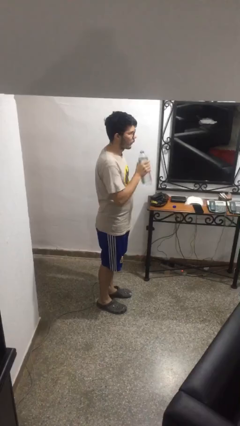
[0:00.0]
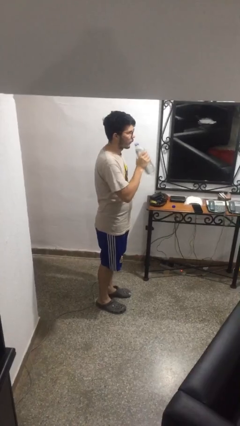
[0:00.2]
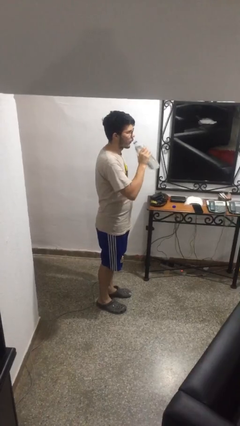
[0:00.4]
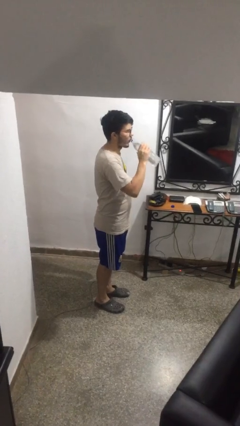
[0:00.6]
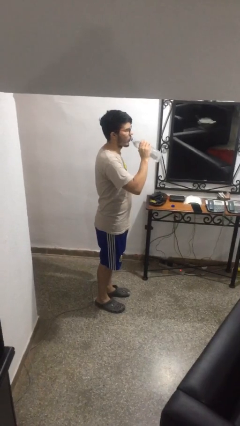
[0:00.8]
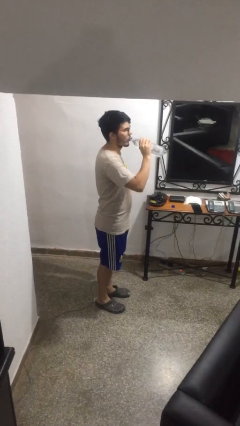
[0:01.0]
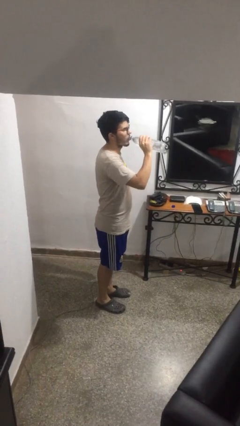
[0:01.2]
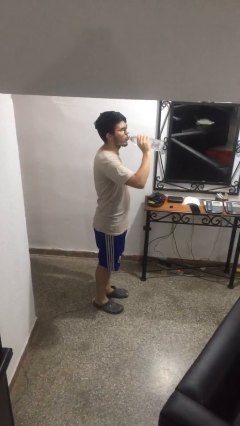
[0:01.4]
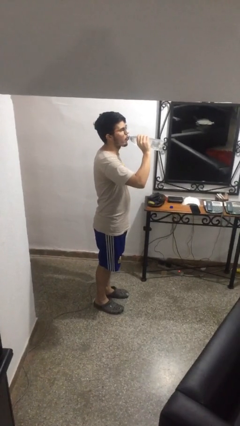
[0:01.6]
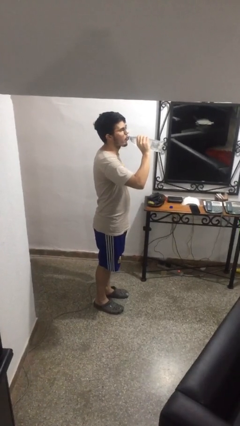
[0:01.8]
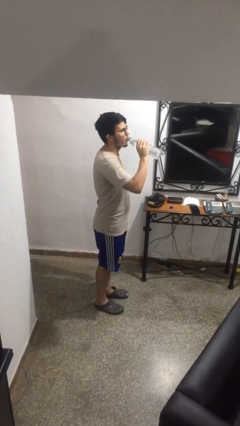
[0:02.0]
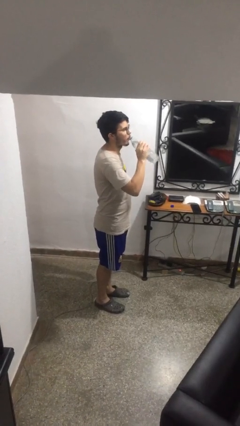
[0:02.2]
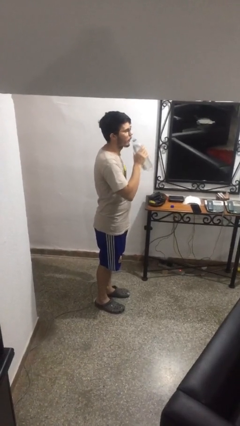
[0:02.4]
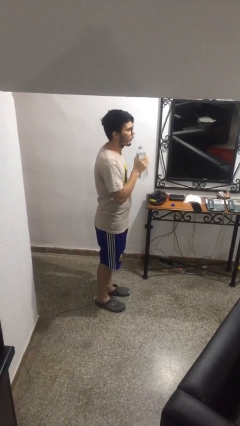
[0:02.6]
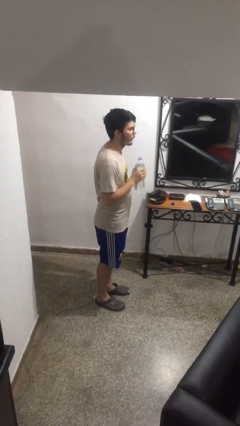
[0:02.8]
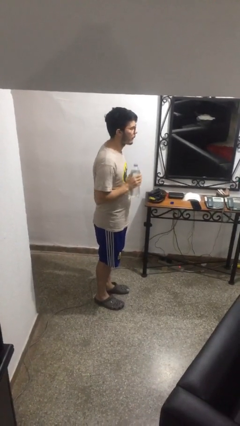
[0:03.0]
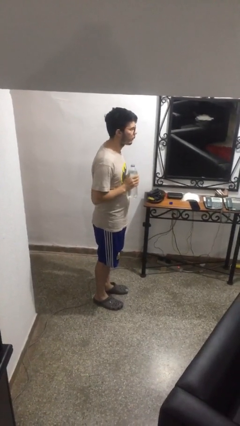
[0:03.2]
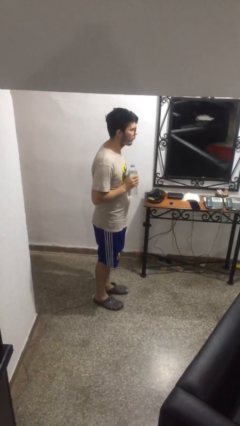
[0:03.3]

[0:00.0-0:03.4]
person drinks from bottle

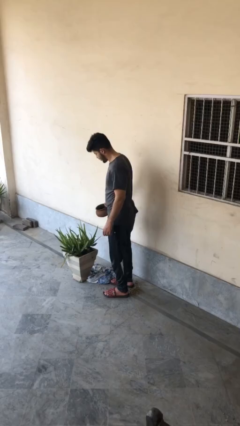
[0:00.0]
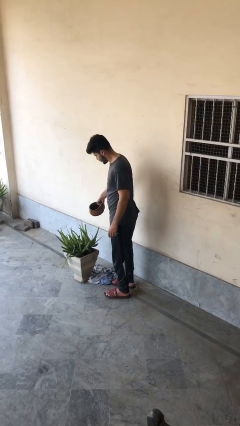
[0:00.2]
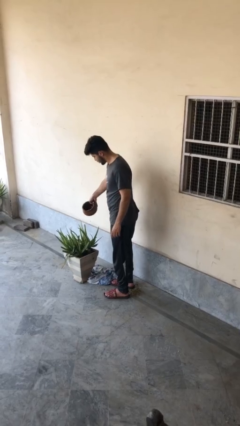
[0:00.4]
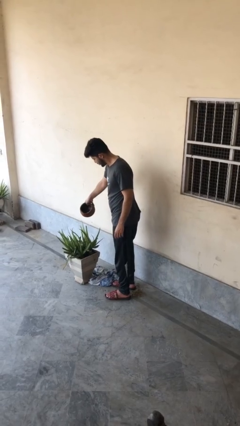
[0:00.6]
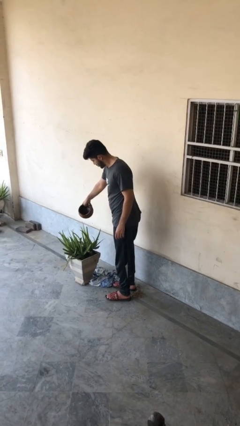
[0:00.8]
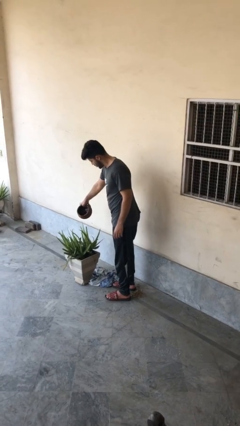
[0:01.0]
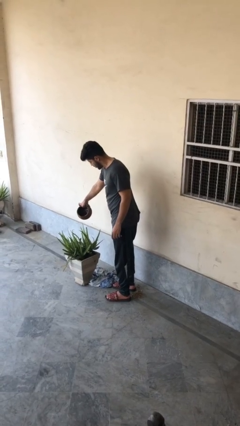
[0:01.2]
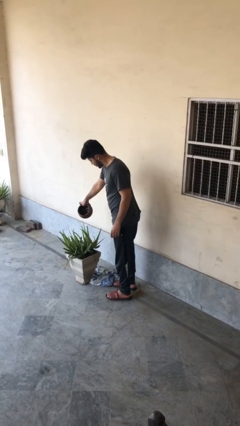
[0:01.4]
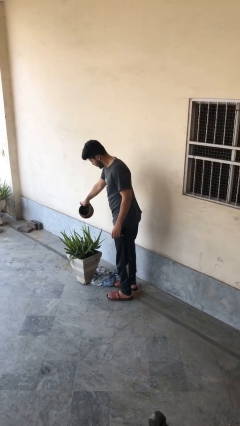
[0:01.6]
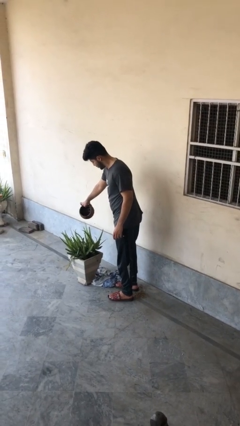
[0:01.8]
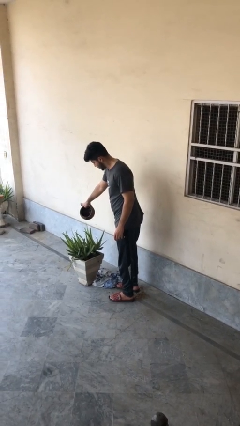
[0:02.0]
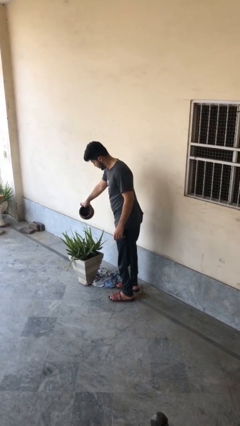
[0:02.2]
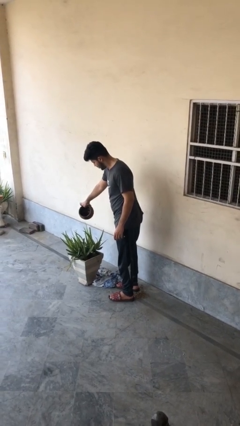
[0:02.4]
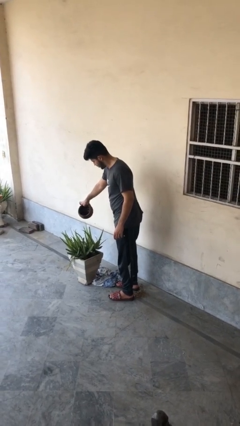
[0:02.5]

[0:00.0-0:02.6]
person waters houseplant

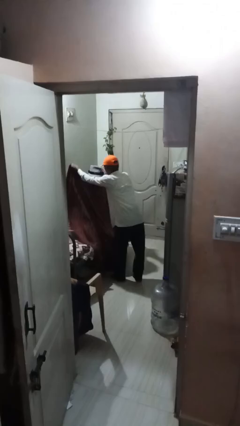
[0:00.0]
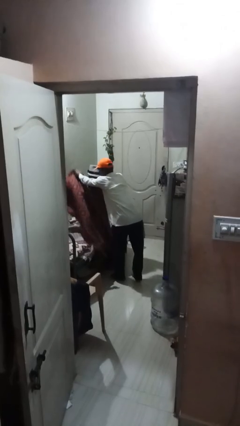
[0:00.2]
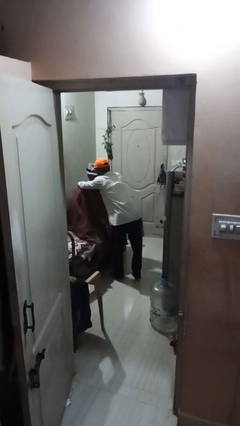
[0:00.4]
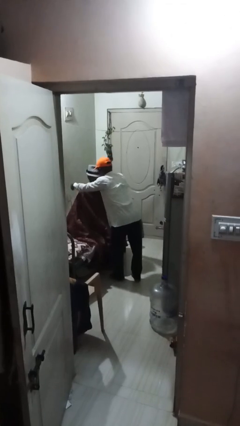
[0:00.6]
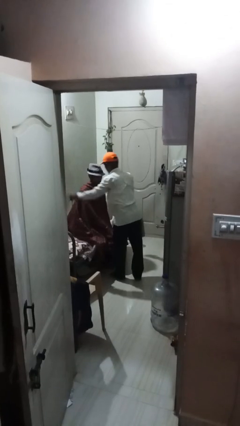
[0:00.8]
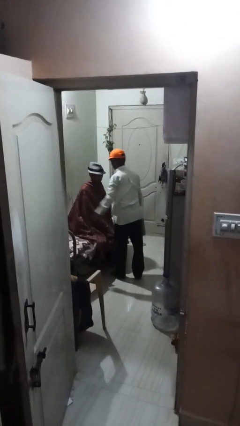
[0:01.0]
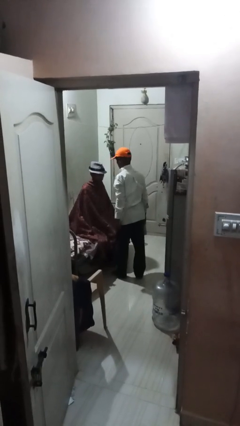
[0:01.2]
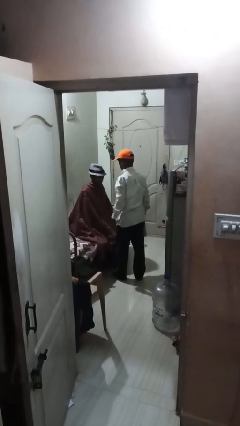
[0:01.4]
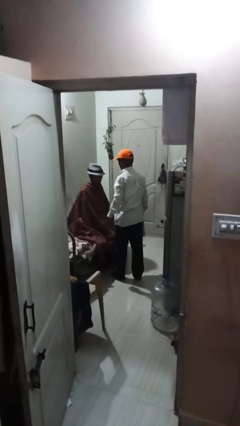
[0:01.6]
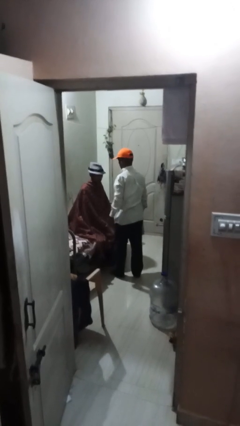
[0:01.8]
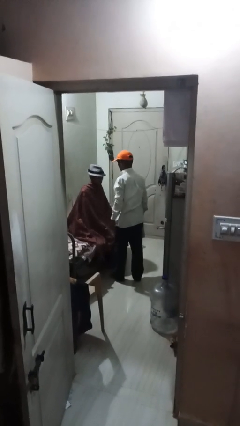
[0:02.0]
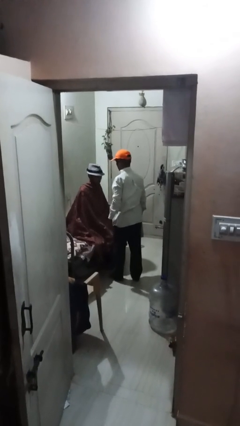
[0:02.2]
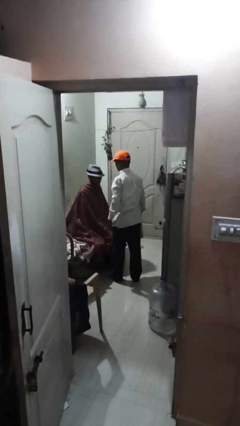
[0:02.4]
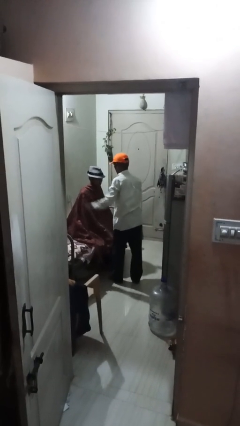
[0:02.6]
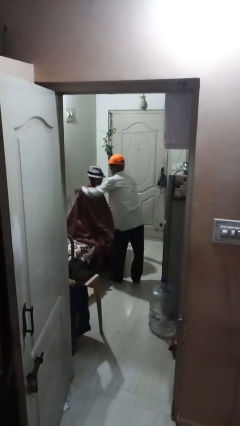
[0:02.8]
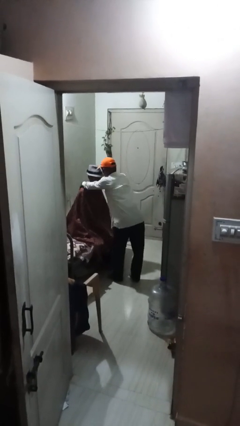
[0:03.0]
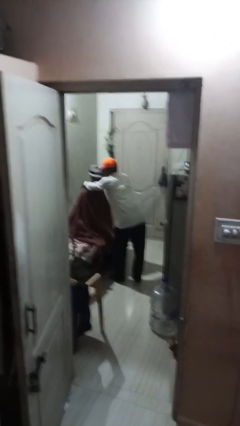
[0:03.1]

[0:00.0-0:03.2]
person covers friend with blanket

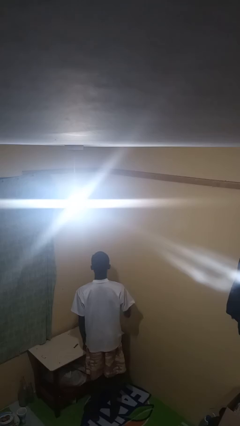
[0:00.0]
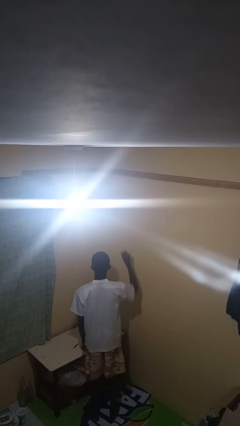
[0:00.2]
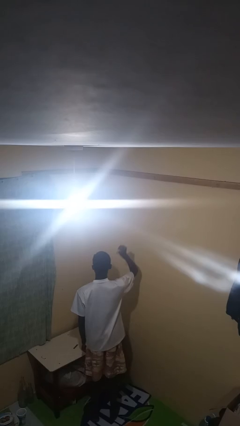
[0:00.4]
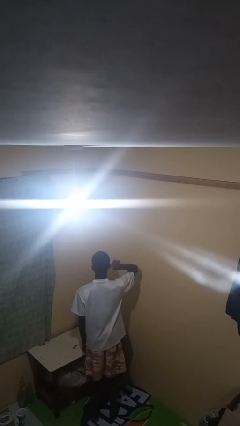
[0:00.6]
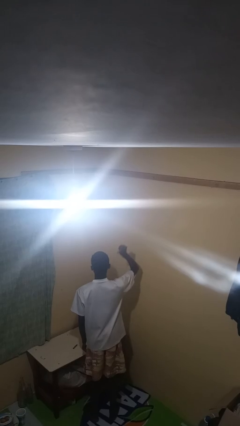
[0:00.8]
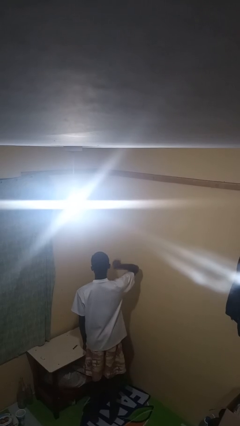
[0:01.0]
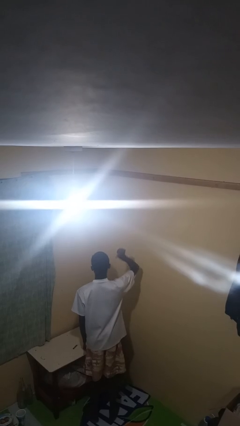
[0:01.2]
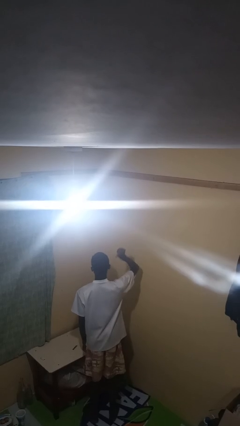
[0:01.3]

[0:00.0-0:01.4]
person gestures behind me

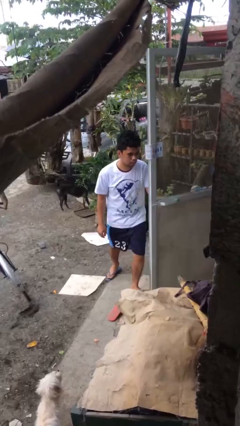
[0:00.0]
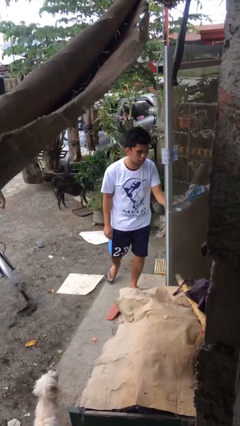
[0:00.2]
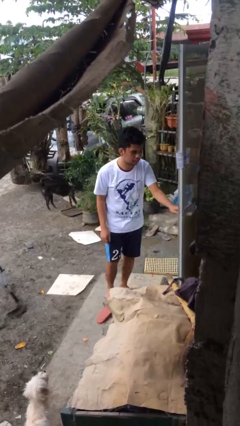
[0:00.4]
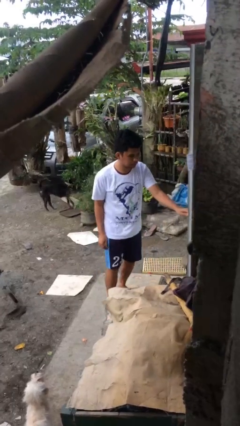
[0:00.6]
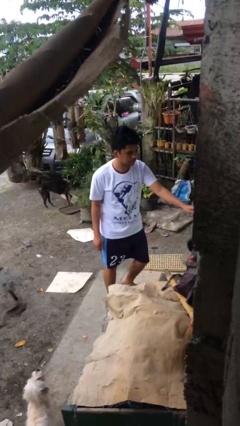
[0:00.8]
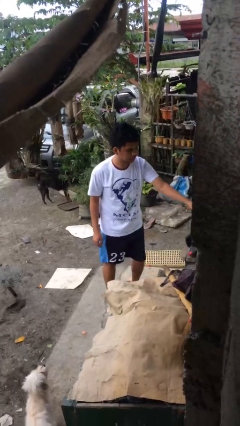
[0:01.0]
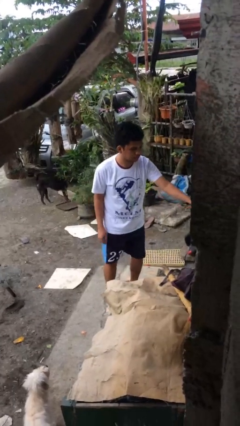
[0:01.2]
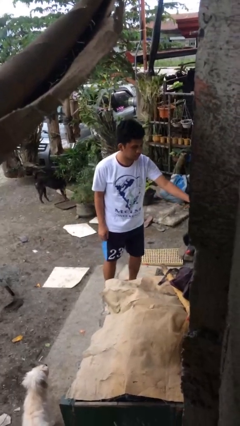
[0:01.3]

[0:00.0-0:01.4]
person closes facility door

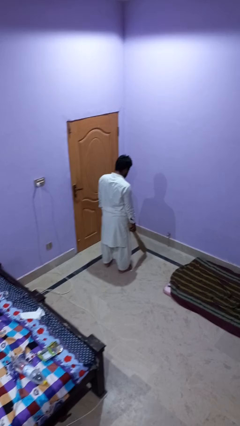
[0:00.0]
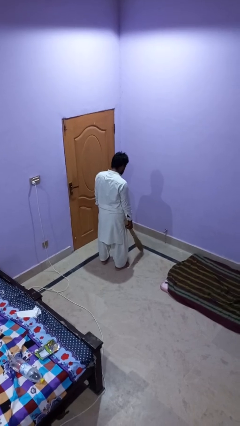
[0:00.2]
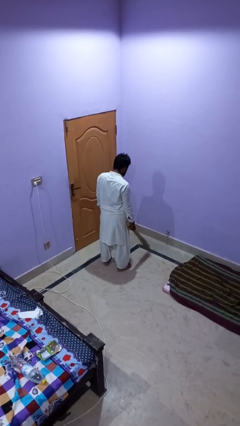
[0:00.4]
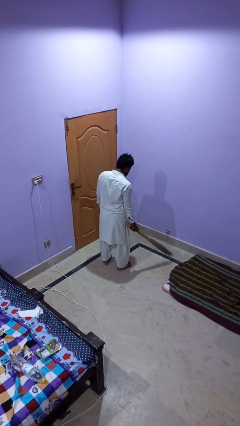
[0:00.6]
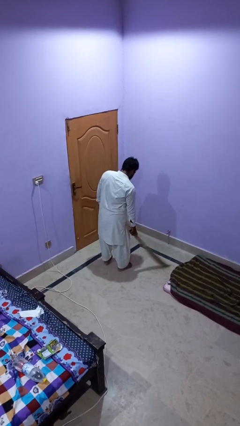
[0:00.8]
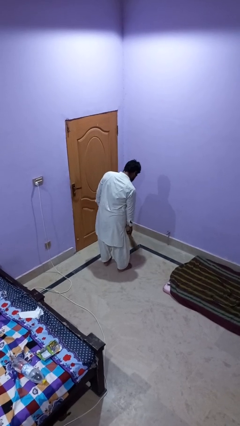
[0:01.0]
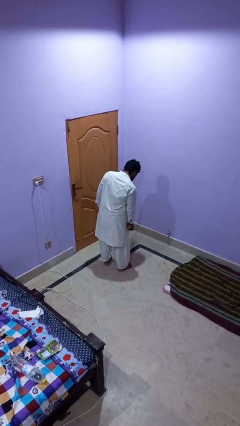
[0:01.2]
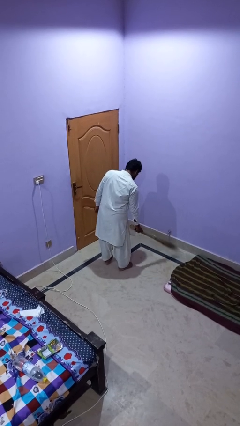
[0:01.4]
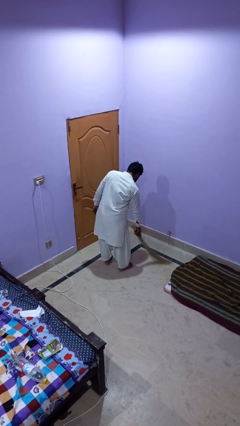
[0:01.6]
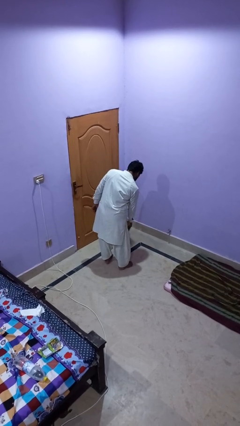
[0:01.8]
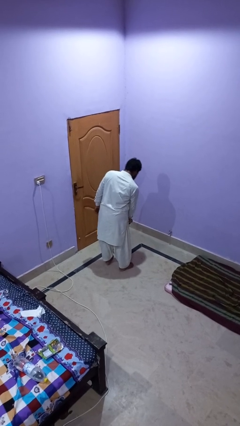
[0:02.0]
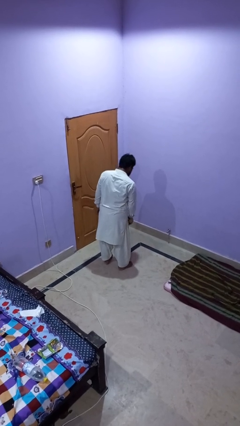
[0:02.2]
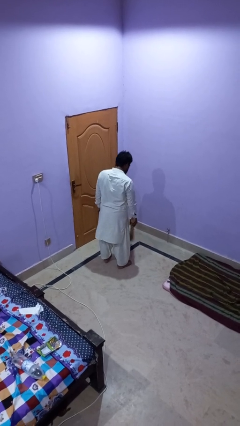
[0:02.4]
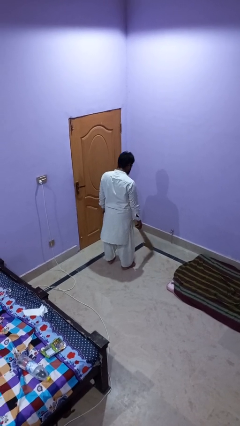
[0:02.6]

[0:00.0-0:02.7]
person sweeps floor

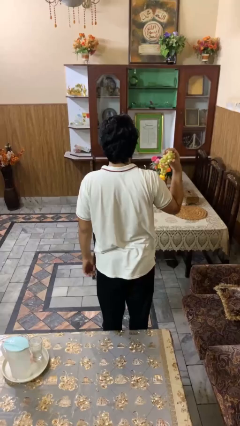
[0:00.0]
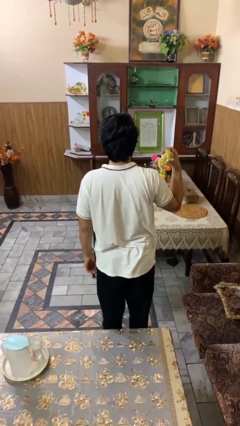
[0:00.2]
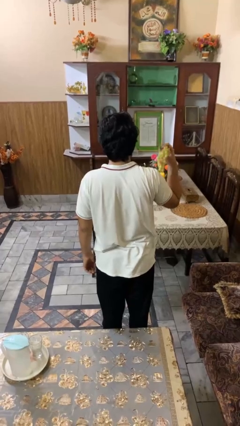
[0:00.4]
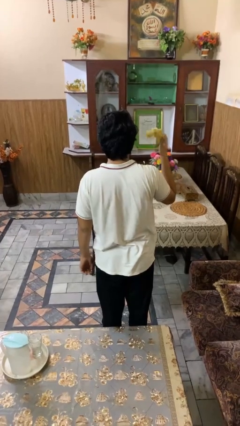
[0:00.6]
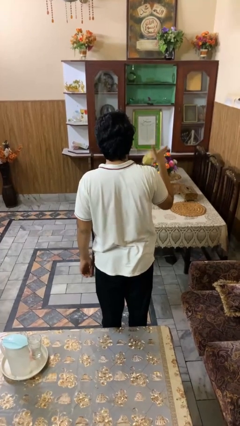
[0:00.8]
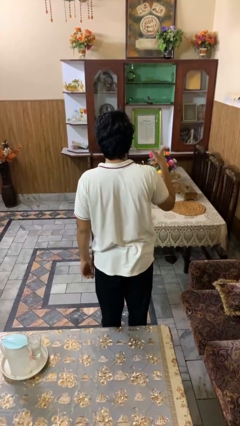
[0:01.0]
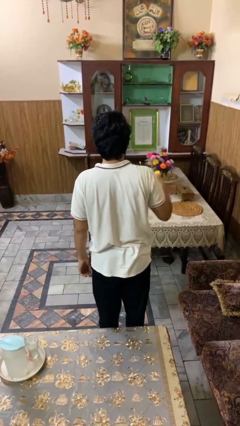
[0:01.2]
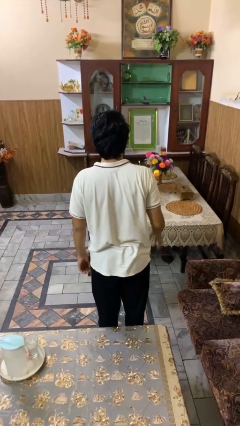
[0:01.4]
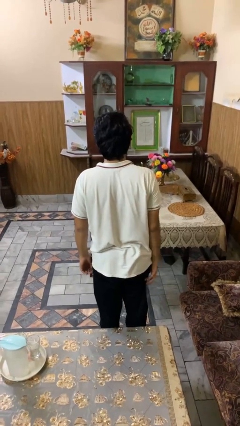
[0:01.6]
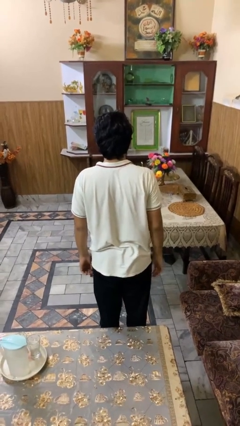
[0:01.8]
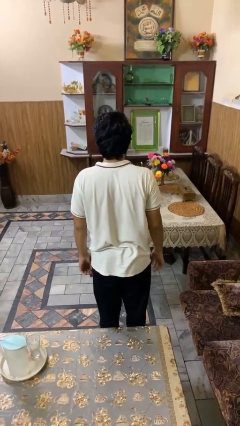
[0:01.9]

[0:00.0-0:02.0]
person throws object on table

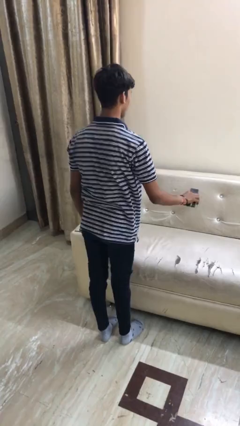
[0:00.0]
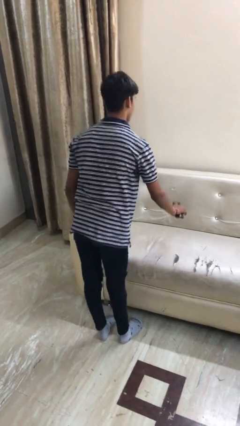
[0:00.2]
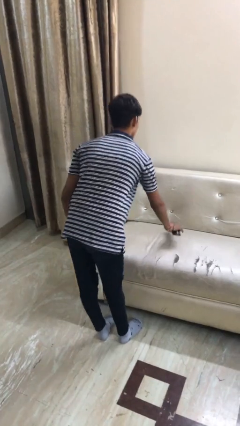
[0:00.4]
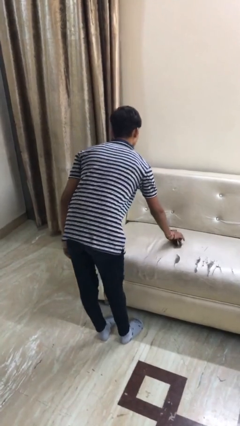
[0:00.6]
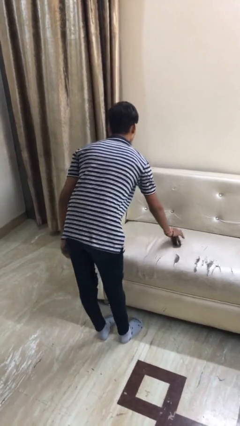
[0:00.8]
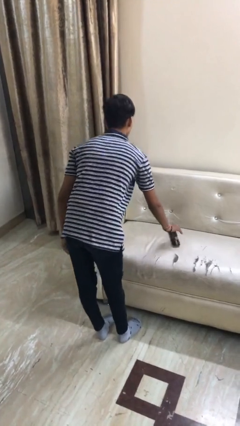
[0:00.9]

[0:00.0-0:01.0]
person puts down object on bed
